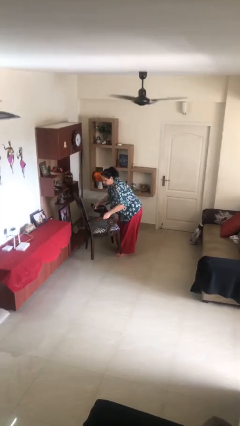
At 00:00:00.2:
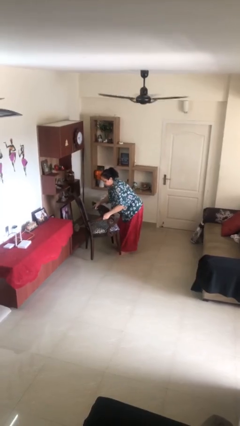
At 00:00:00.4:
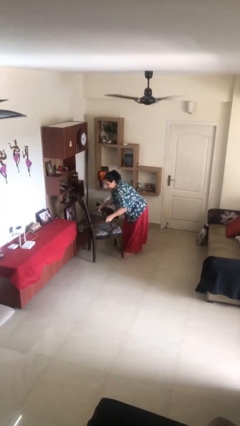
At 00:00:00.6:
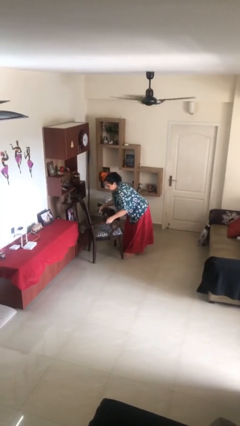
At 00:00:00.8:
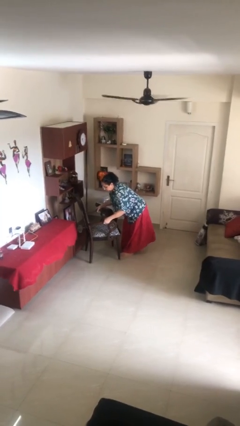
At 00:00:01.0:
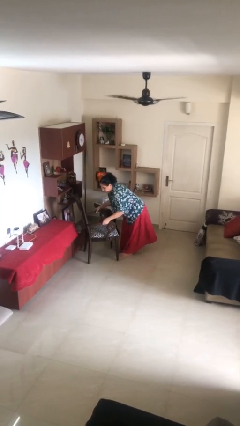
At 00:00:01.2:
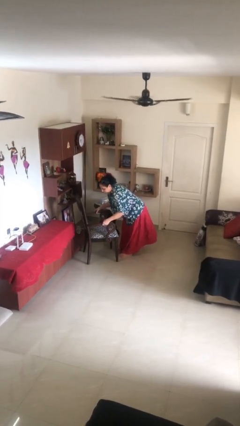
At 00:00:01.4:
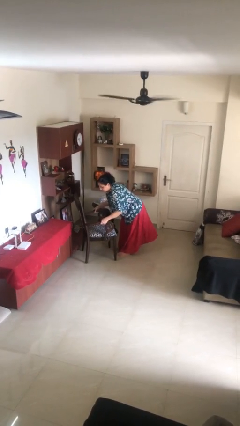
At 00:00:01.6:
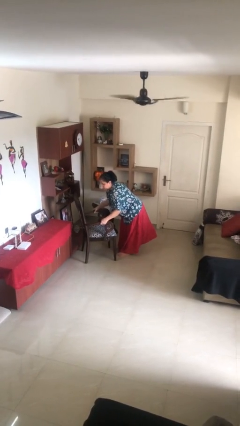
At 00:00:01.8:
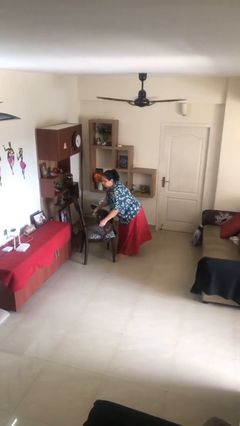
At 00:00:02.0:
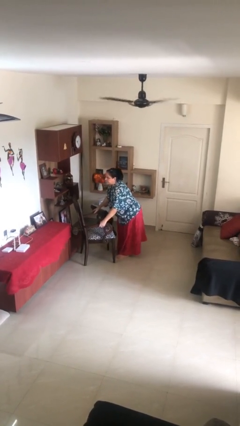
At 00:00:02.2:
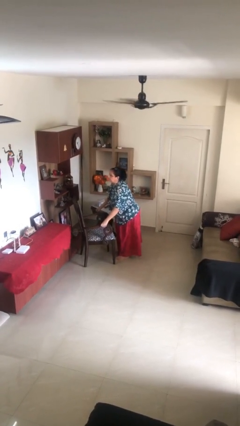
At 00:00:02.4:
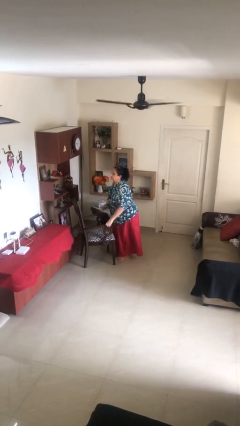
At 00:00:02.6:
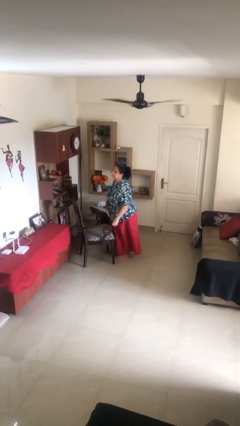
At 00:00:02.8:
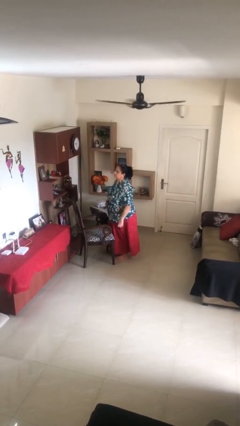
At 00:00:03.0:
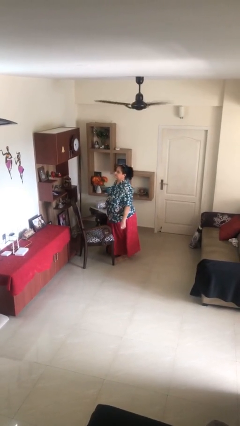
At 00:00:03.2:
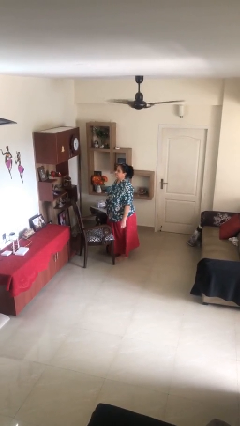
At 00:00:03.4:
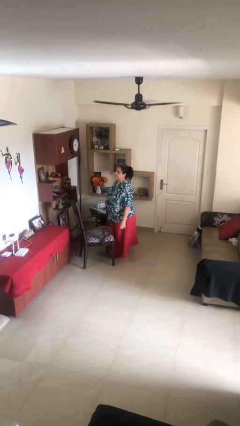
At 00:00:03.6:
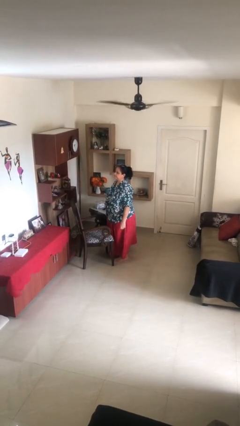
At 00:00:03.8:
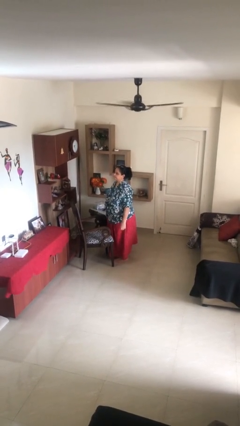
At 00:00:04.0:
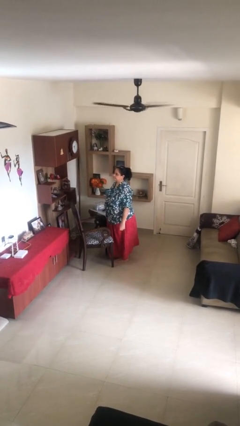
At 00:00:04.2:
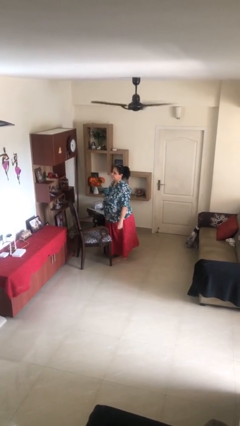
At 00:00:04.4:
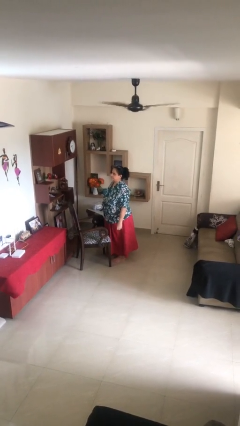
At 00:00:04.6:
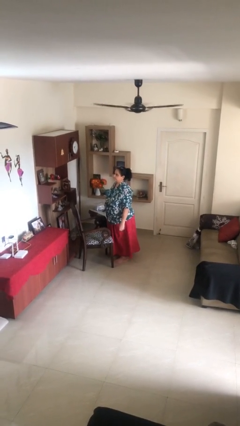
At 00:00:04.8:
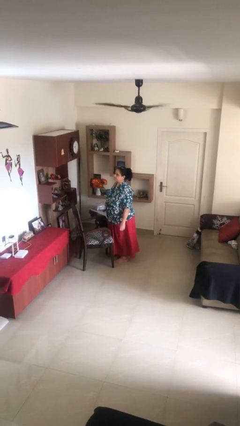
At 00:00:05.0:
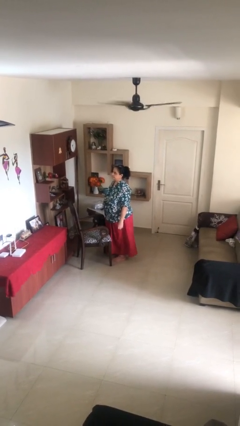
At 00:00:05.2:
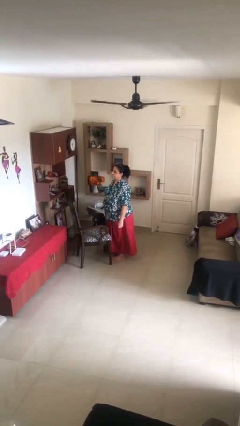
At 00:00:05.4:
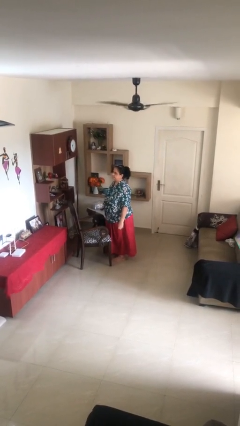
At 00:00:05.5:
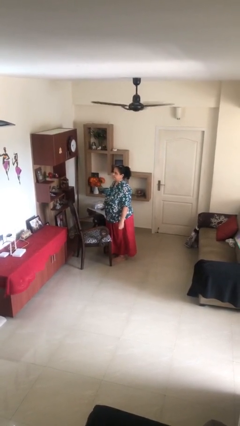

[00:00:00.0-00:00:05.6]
person puts down object on floor

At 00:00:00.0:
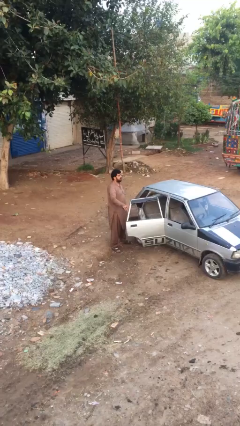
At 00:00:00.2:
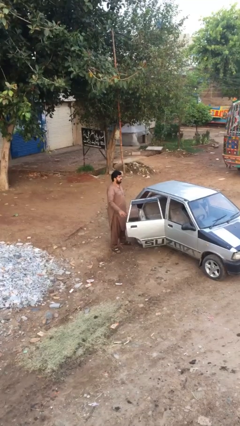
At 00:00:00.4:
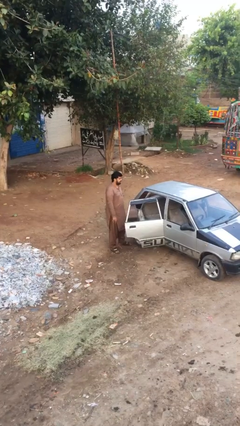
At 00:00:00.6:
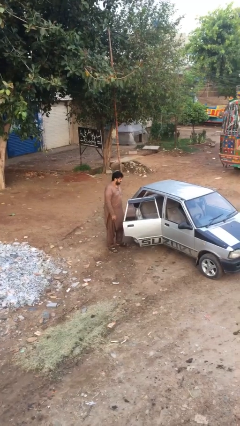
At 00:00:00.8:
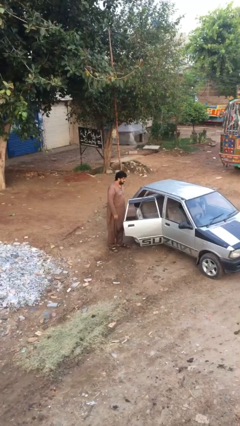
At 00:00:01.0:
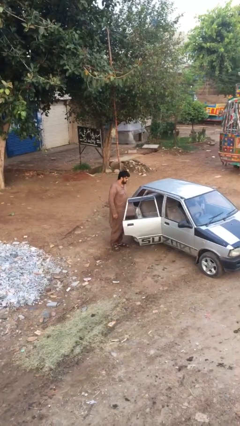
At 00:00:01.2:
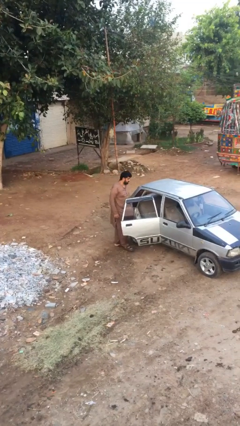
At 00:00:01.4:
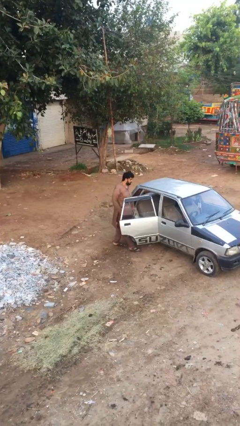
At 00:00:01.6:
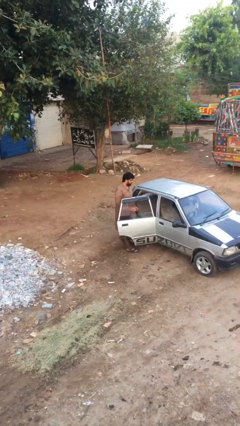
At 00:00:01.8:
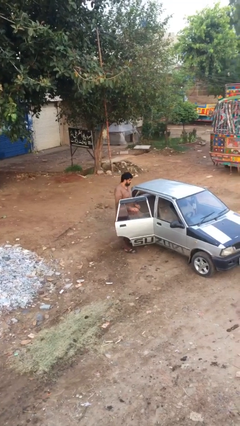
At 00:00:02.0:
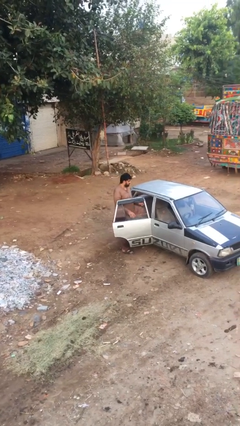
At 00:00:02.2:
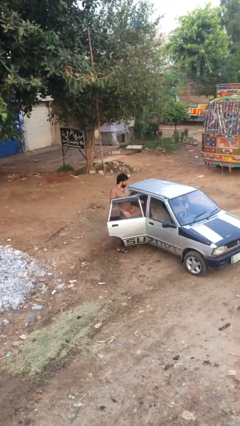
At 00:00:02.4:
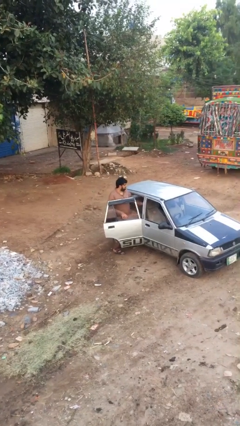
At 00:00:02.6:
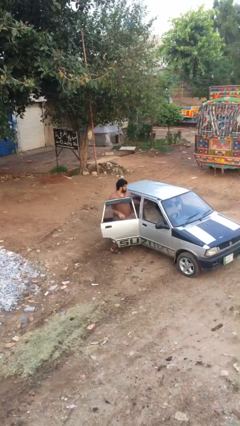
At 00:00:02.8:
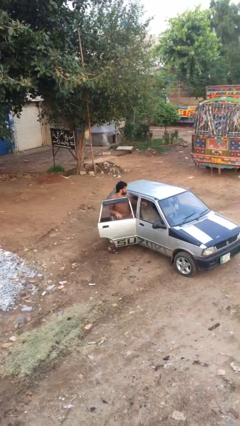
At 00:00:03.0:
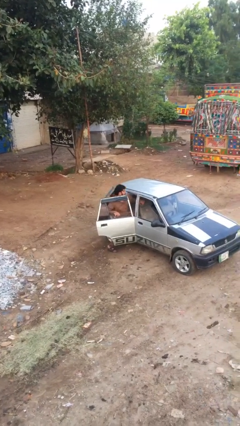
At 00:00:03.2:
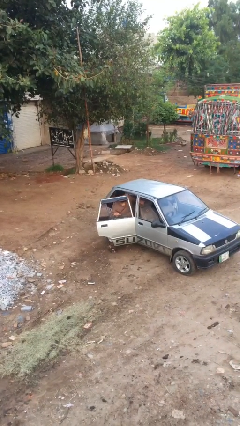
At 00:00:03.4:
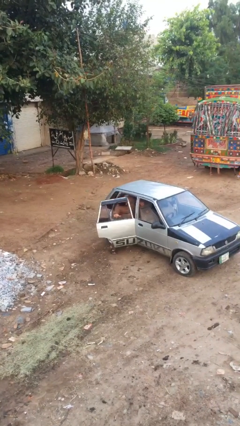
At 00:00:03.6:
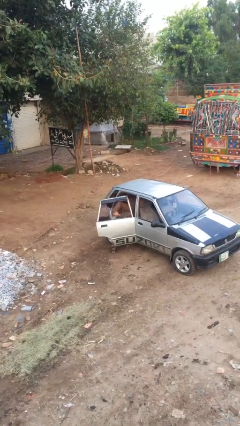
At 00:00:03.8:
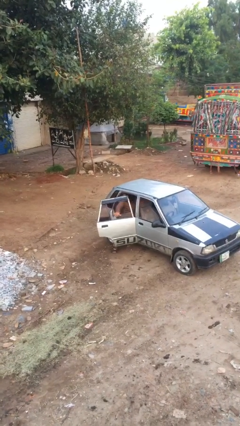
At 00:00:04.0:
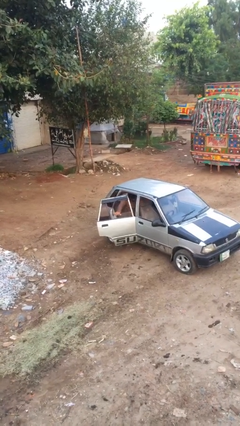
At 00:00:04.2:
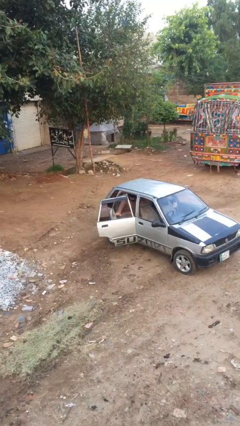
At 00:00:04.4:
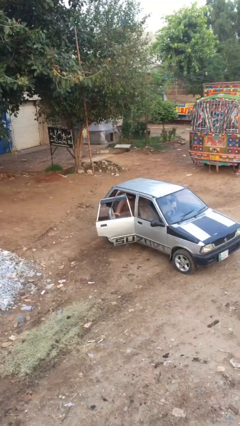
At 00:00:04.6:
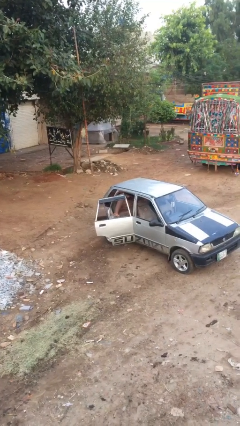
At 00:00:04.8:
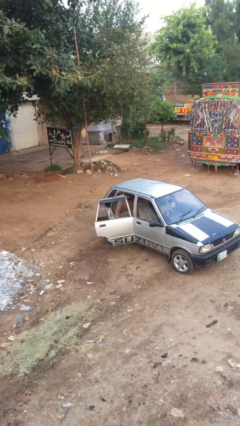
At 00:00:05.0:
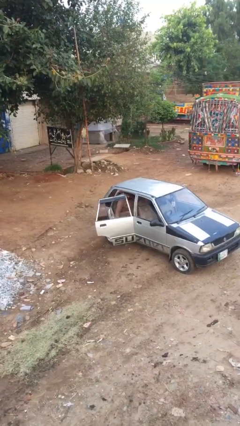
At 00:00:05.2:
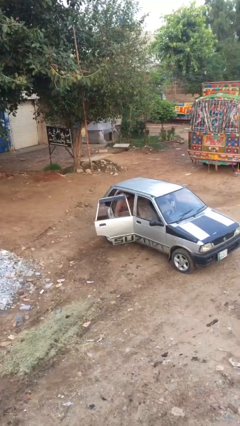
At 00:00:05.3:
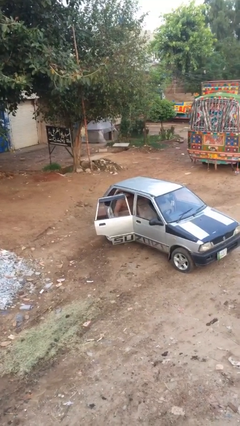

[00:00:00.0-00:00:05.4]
person enters car

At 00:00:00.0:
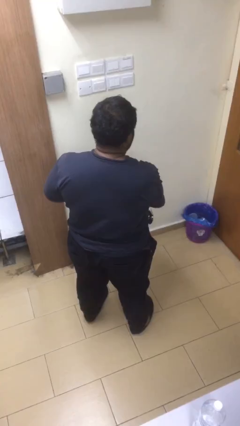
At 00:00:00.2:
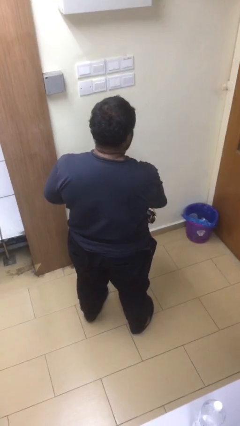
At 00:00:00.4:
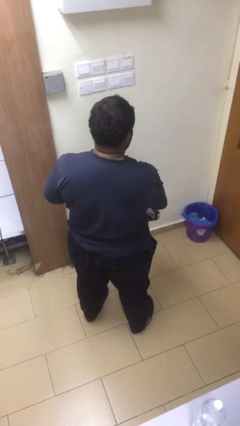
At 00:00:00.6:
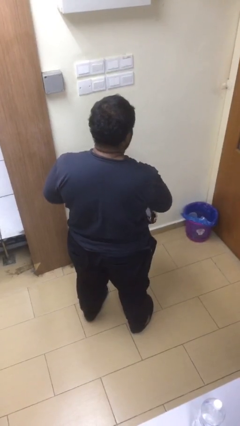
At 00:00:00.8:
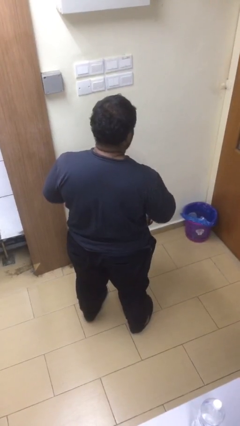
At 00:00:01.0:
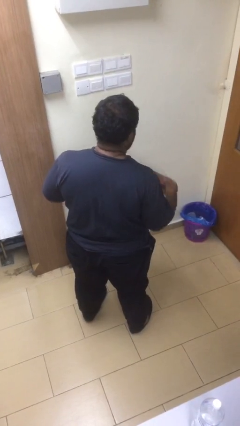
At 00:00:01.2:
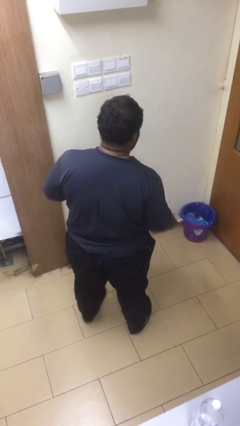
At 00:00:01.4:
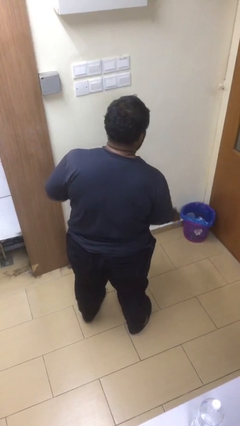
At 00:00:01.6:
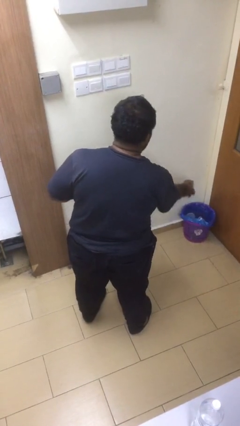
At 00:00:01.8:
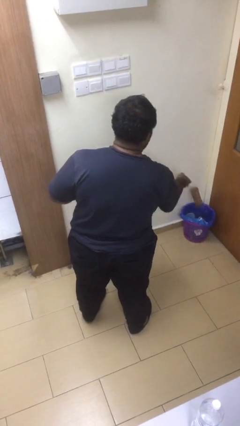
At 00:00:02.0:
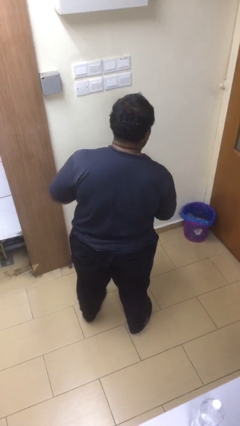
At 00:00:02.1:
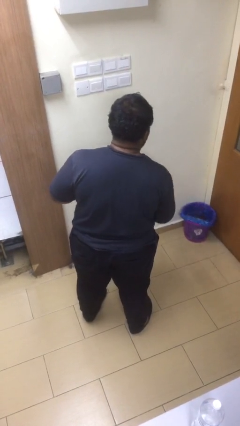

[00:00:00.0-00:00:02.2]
person discards trash

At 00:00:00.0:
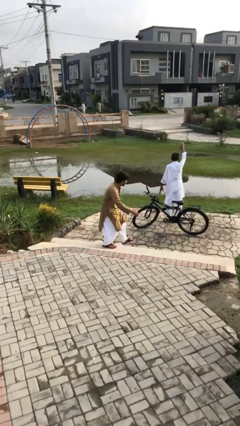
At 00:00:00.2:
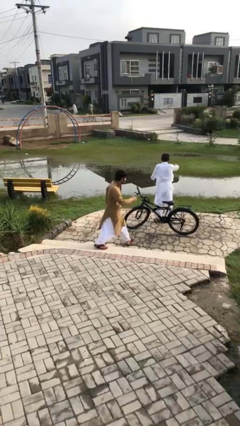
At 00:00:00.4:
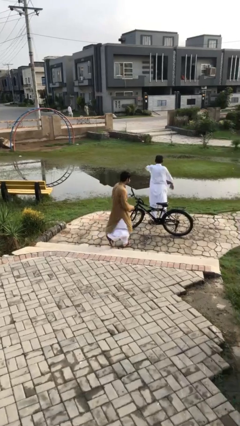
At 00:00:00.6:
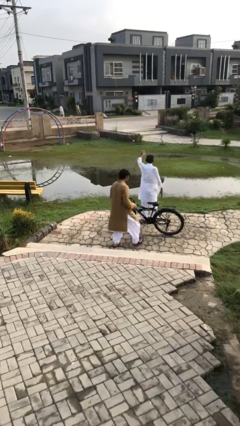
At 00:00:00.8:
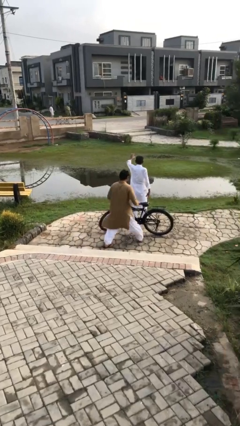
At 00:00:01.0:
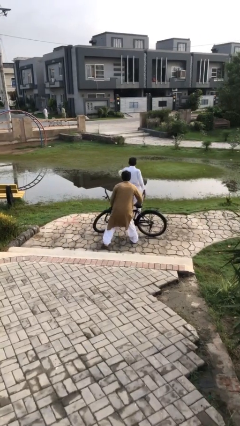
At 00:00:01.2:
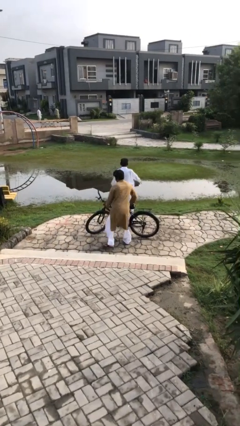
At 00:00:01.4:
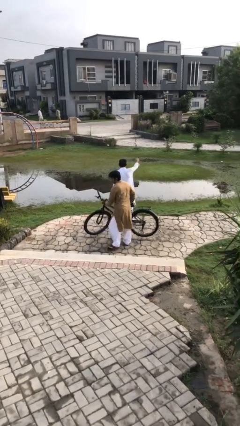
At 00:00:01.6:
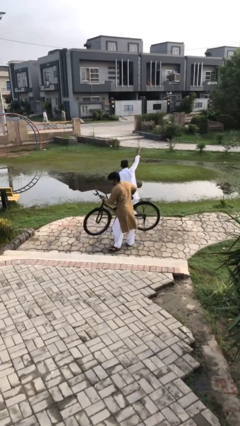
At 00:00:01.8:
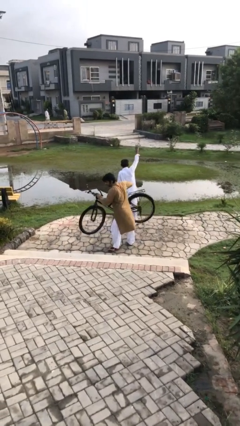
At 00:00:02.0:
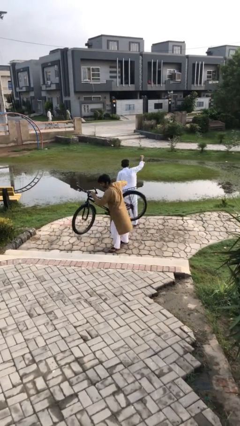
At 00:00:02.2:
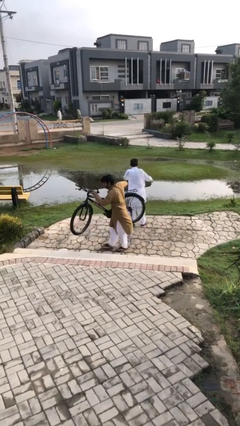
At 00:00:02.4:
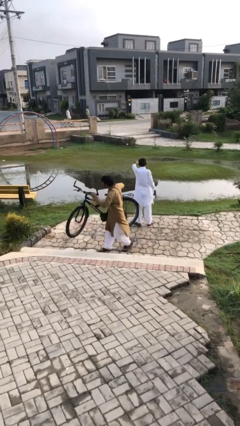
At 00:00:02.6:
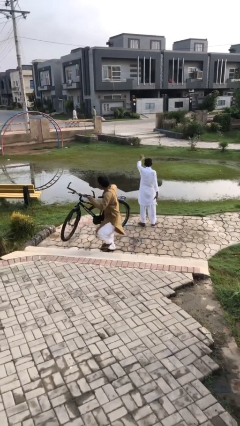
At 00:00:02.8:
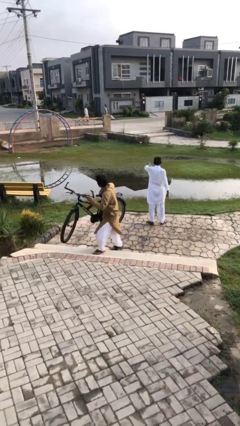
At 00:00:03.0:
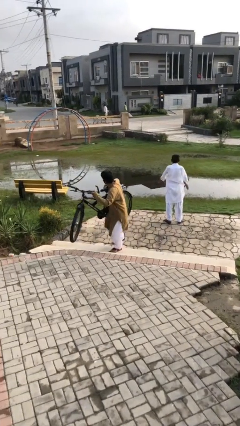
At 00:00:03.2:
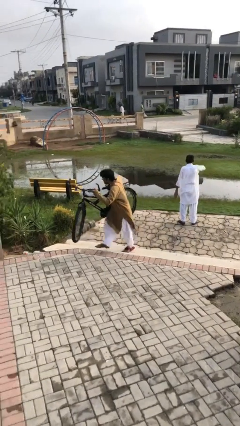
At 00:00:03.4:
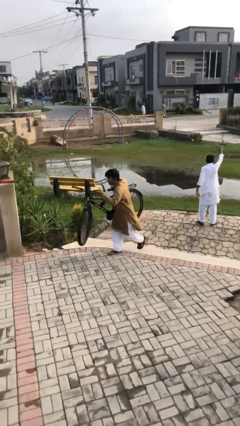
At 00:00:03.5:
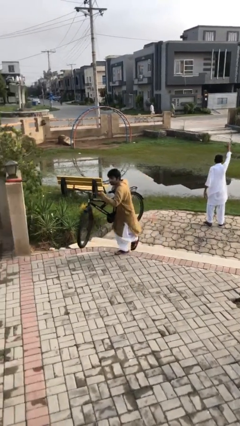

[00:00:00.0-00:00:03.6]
person steals object from person

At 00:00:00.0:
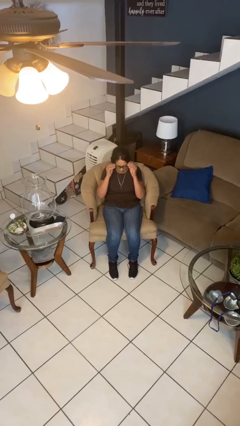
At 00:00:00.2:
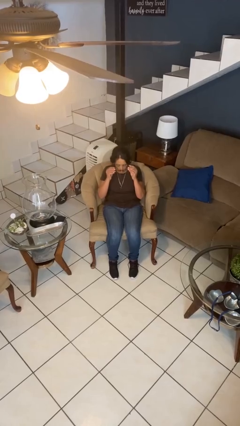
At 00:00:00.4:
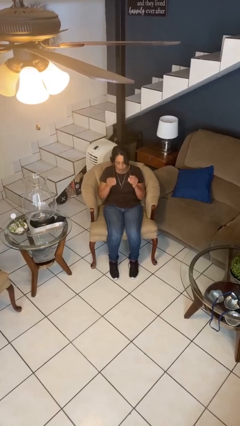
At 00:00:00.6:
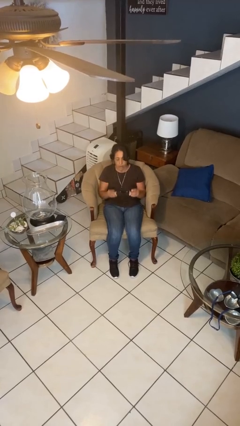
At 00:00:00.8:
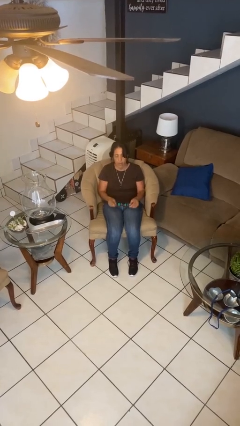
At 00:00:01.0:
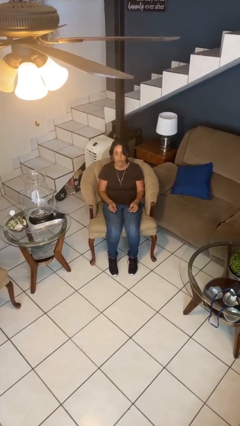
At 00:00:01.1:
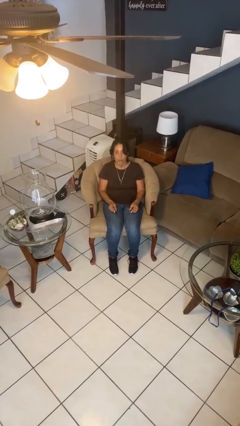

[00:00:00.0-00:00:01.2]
person takes off glasses
